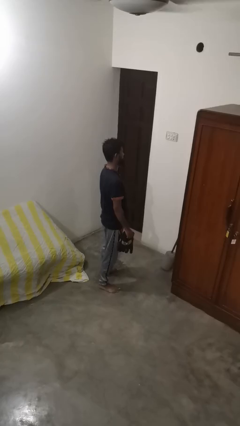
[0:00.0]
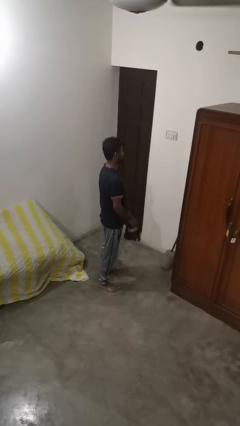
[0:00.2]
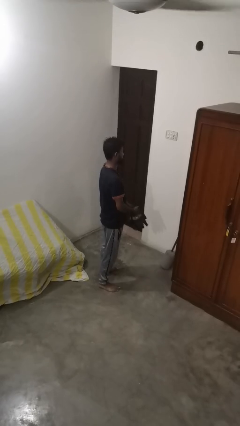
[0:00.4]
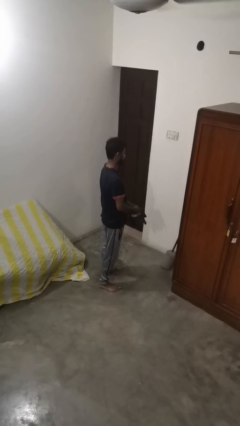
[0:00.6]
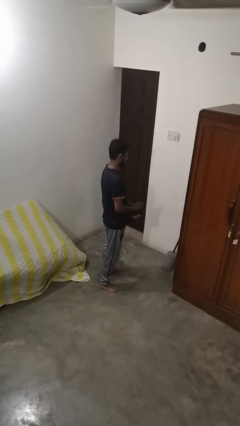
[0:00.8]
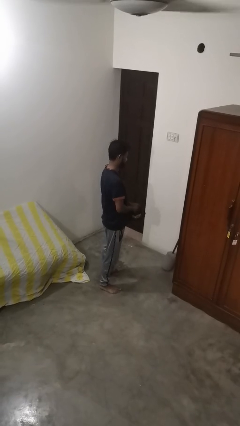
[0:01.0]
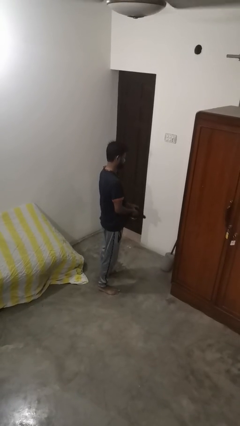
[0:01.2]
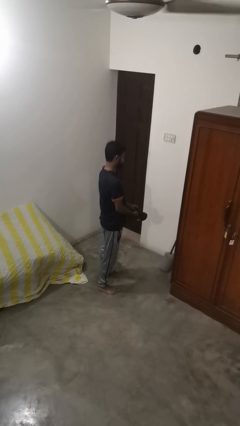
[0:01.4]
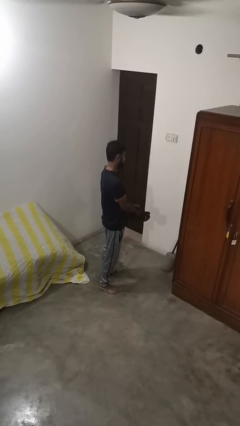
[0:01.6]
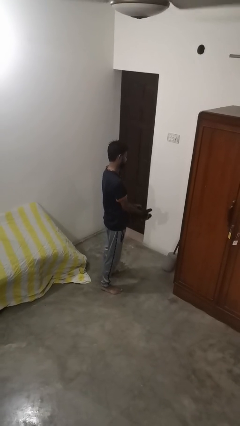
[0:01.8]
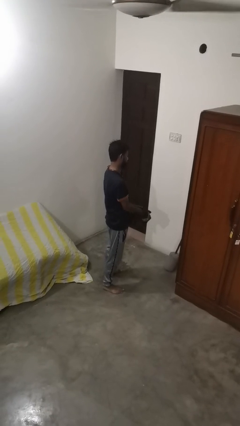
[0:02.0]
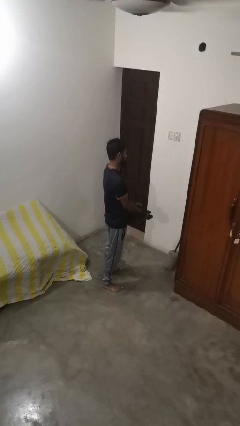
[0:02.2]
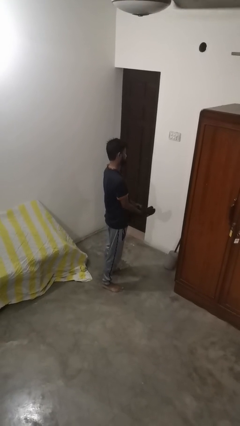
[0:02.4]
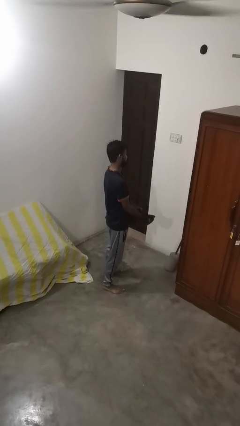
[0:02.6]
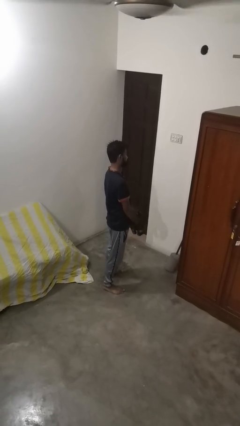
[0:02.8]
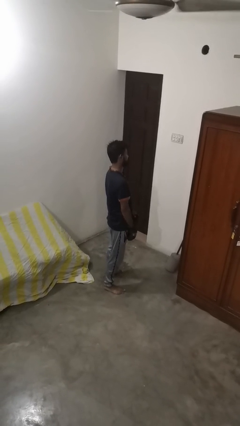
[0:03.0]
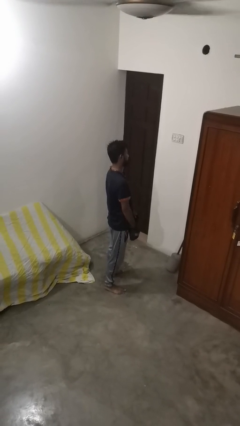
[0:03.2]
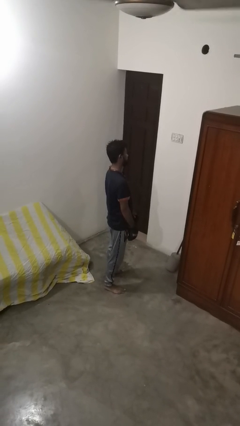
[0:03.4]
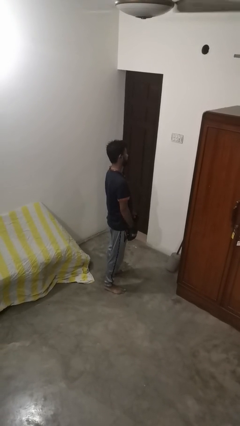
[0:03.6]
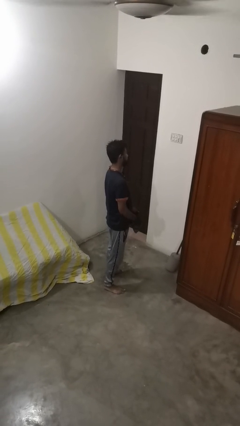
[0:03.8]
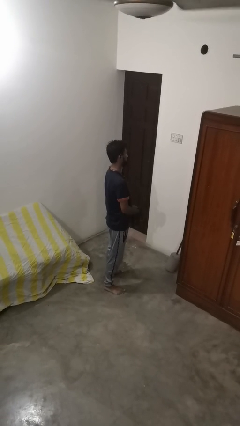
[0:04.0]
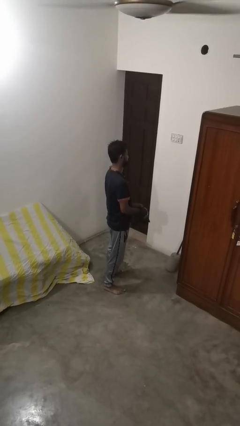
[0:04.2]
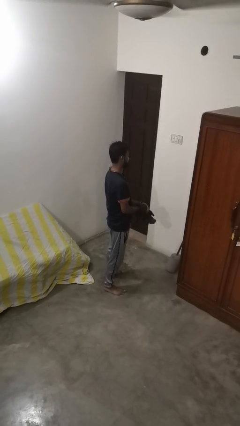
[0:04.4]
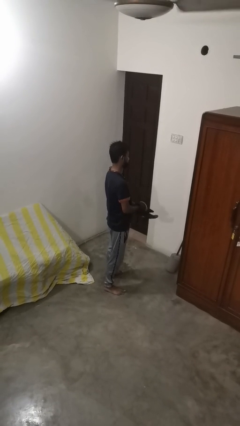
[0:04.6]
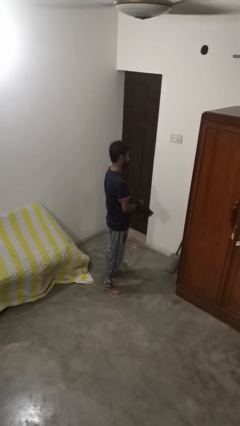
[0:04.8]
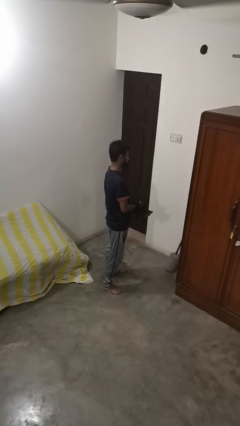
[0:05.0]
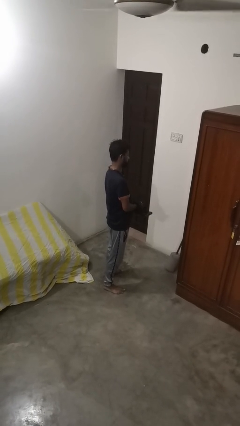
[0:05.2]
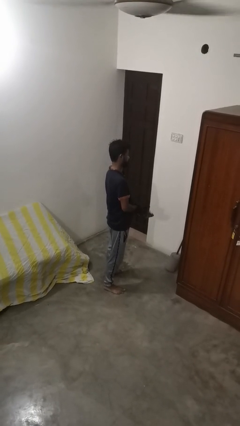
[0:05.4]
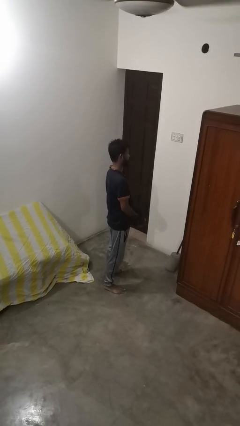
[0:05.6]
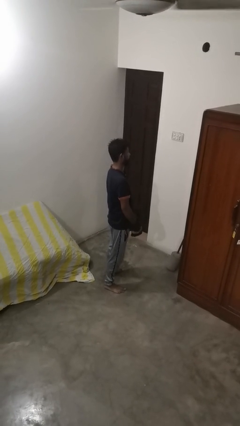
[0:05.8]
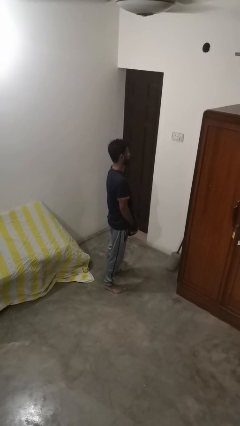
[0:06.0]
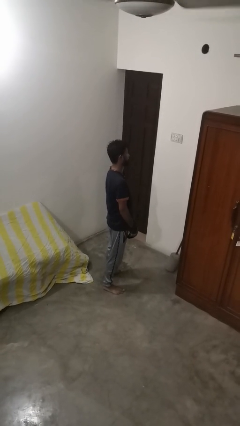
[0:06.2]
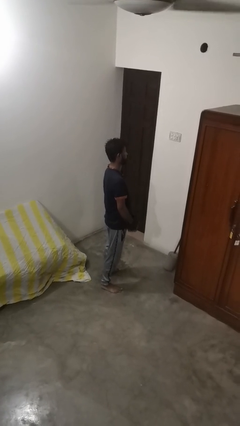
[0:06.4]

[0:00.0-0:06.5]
person puts on gloves

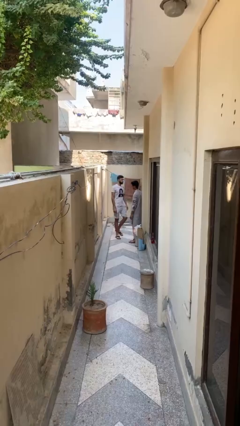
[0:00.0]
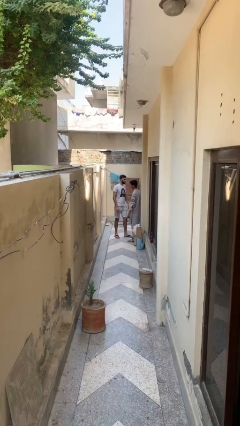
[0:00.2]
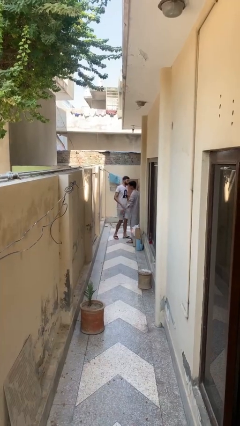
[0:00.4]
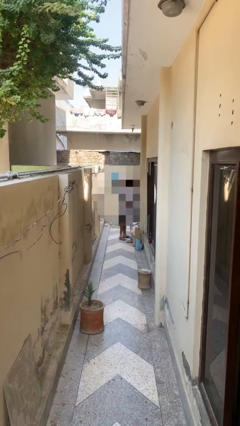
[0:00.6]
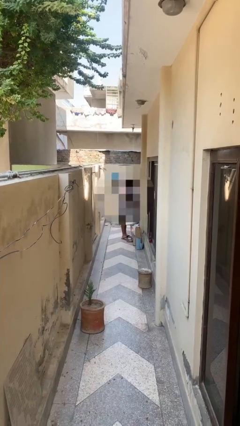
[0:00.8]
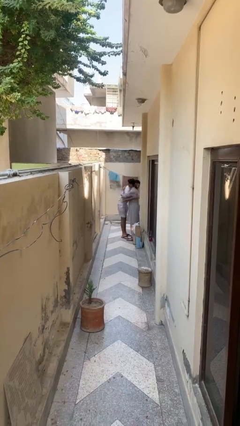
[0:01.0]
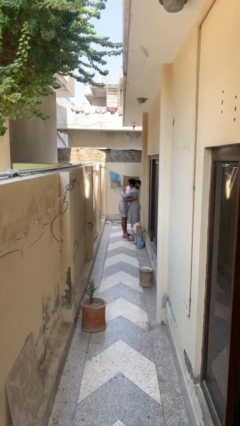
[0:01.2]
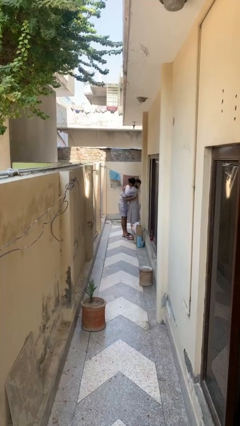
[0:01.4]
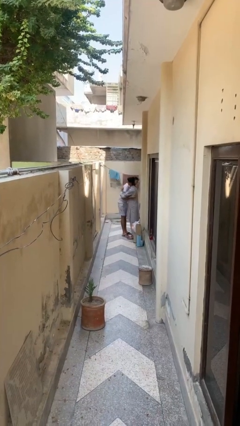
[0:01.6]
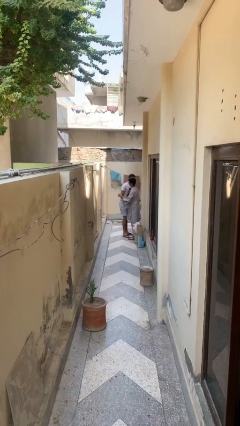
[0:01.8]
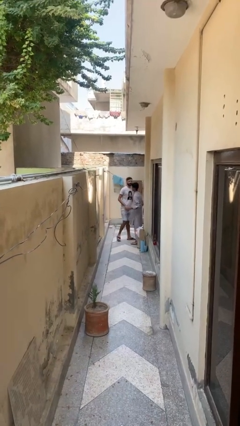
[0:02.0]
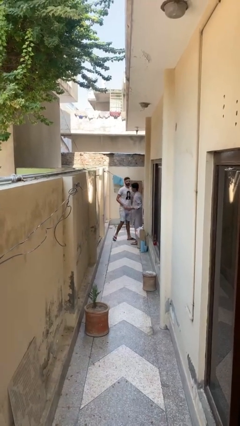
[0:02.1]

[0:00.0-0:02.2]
person embraces person

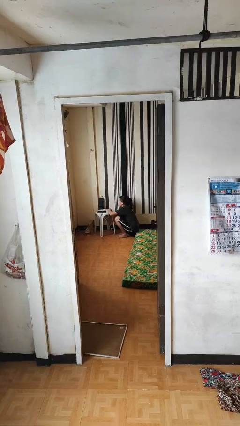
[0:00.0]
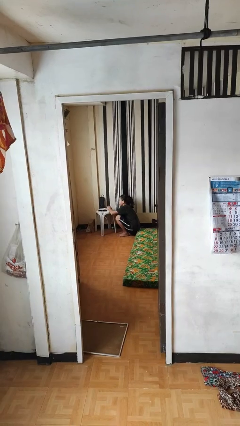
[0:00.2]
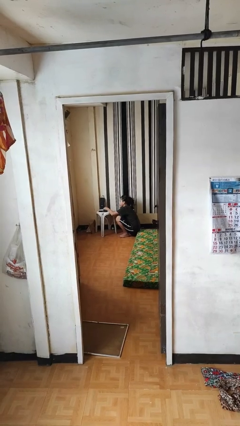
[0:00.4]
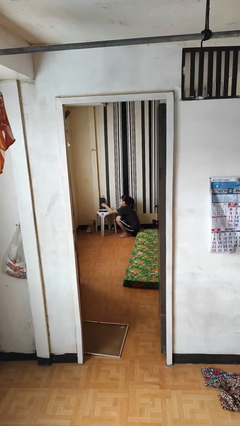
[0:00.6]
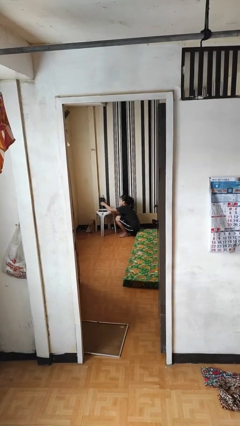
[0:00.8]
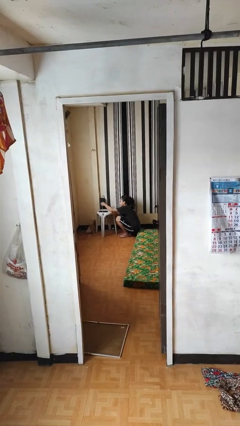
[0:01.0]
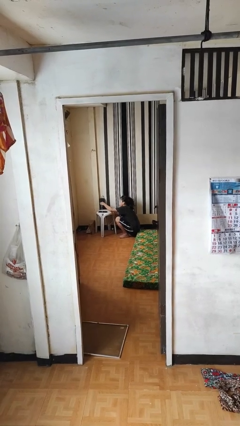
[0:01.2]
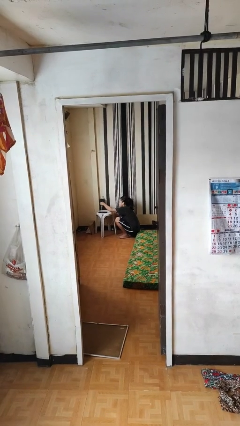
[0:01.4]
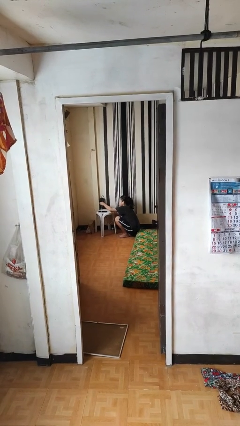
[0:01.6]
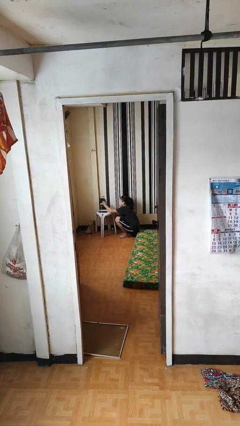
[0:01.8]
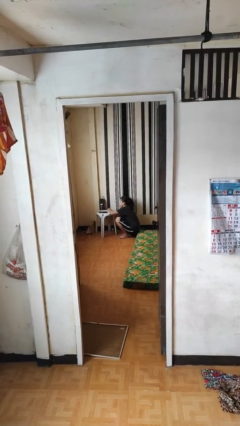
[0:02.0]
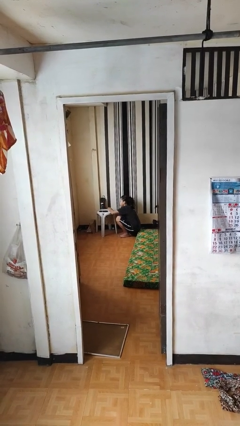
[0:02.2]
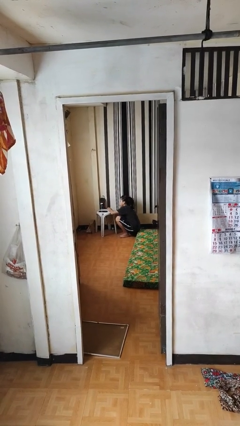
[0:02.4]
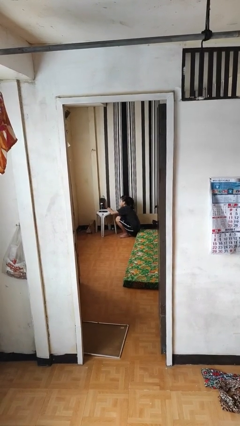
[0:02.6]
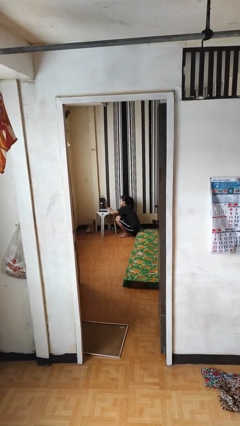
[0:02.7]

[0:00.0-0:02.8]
person plugs into electrical socket

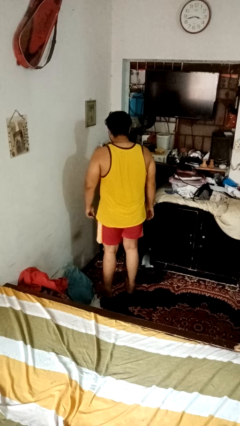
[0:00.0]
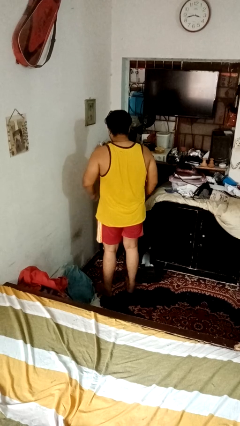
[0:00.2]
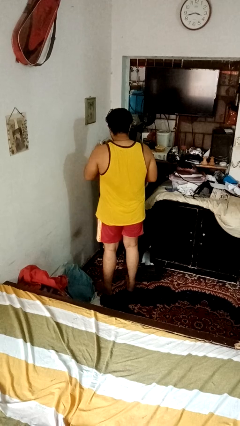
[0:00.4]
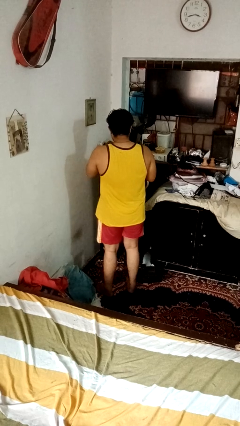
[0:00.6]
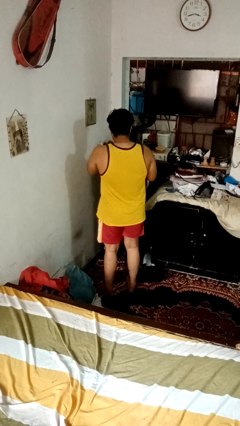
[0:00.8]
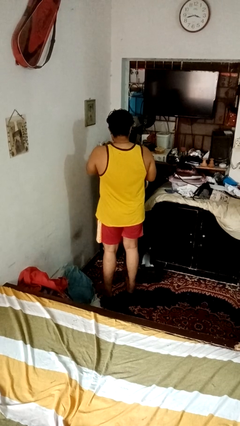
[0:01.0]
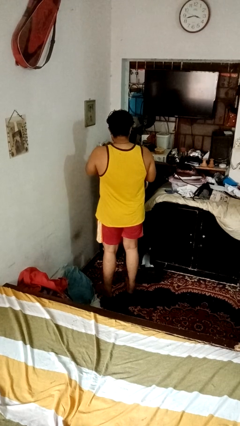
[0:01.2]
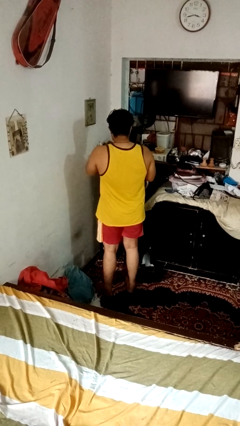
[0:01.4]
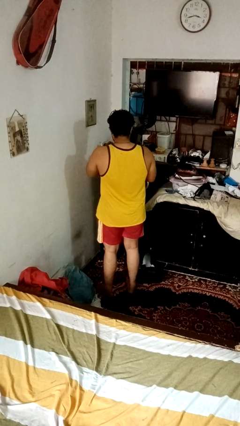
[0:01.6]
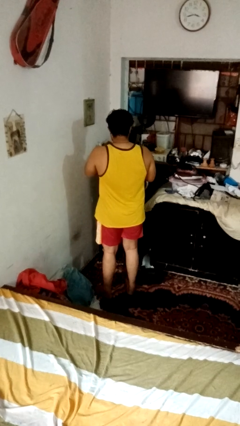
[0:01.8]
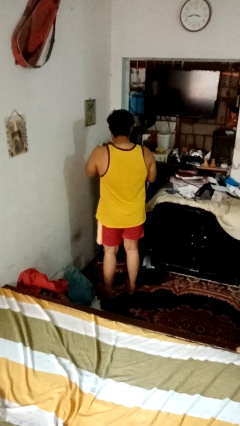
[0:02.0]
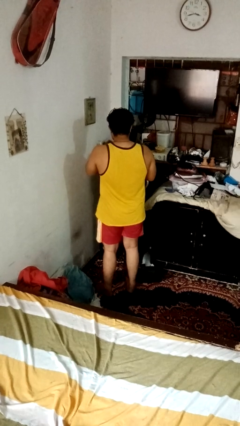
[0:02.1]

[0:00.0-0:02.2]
person files fingernails

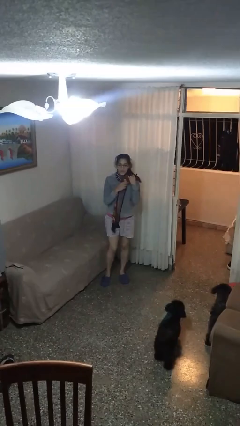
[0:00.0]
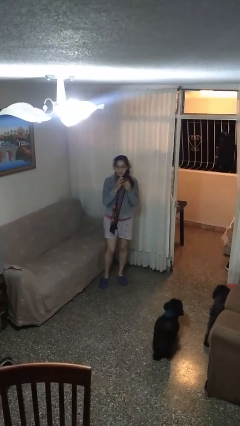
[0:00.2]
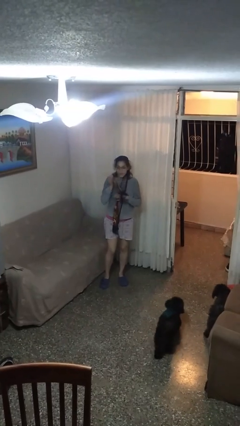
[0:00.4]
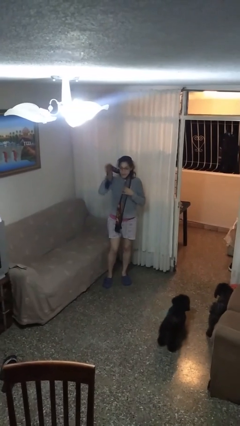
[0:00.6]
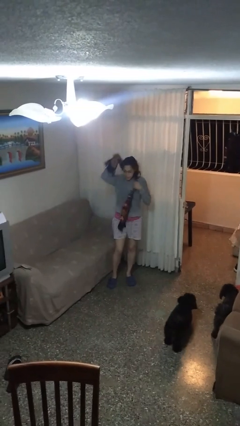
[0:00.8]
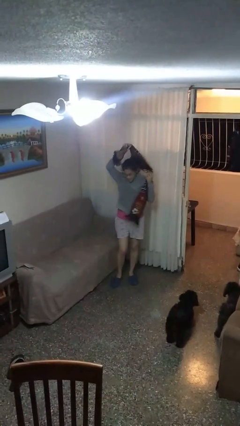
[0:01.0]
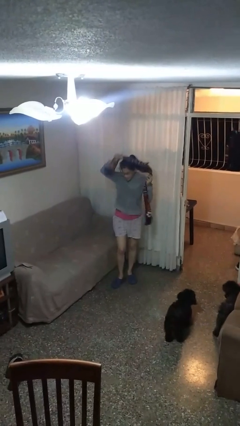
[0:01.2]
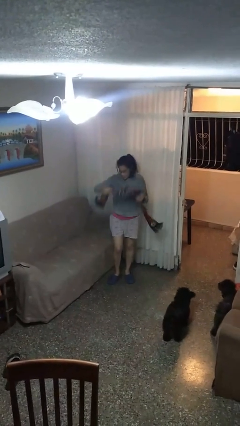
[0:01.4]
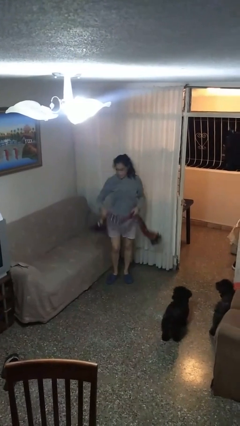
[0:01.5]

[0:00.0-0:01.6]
person takes off scarf

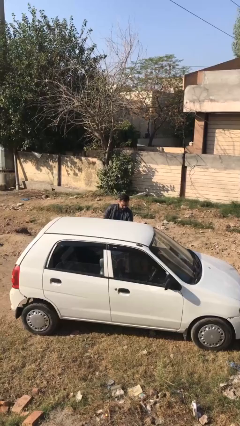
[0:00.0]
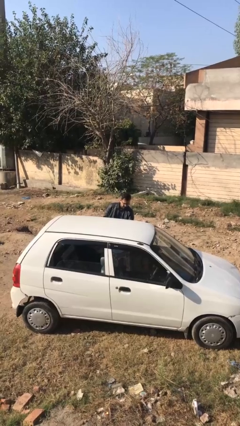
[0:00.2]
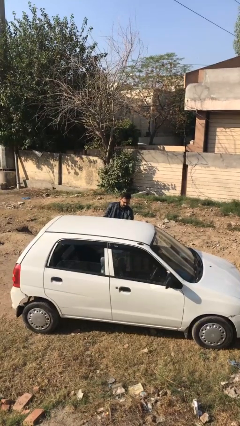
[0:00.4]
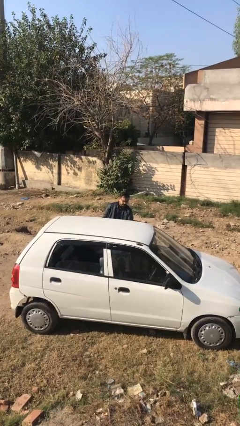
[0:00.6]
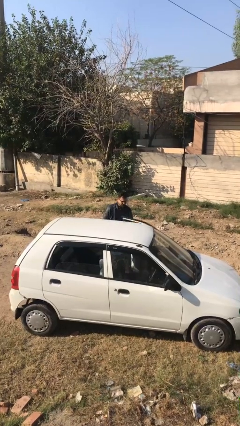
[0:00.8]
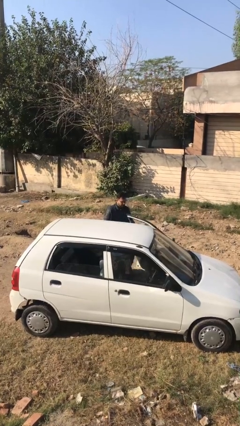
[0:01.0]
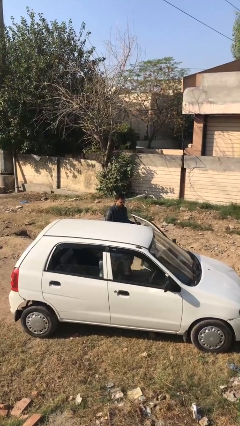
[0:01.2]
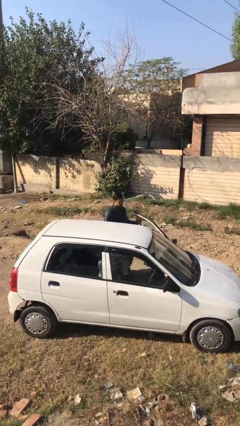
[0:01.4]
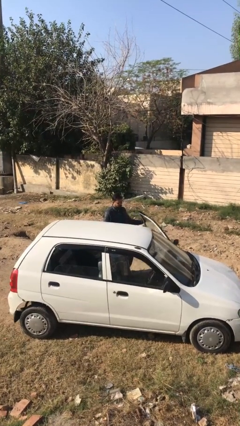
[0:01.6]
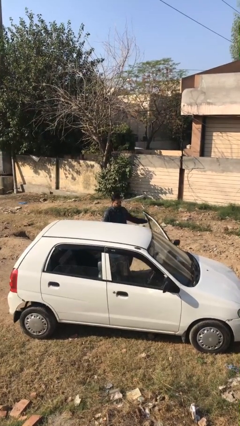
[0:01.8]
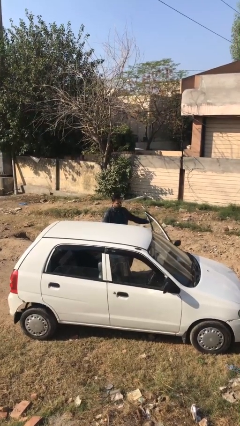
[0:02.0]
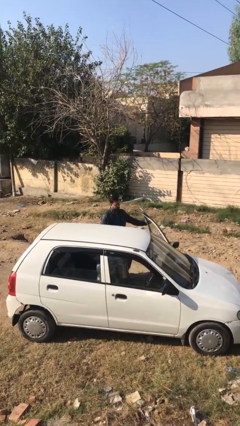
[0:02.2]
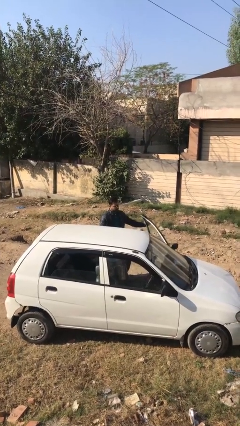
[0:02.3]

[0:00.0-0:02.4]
person opens car door
